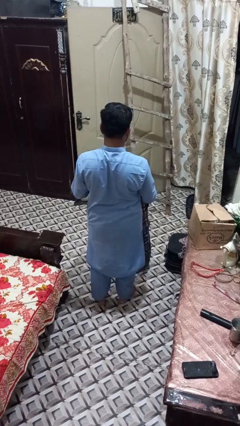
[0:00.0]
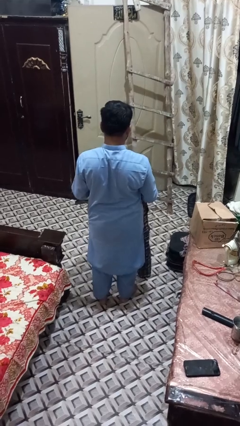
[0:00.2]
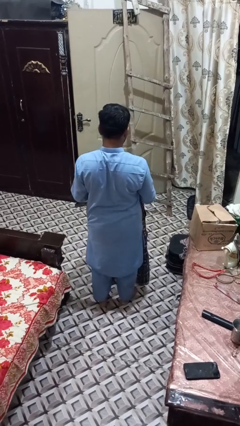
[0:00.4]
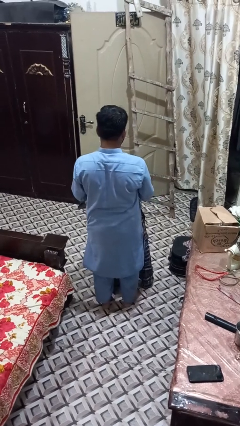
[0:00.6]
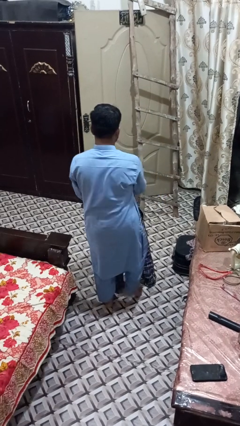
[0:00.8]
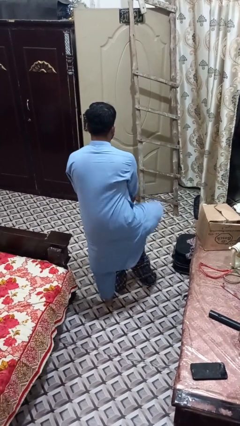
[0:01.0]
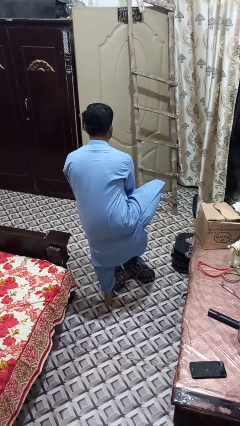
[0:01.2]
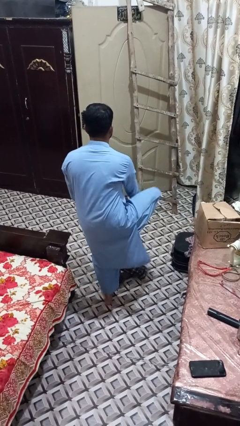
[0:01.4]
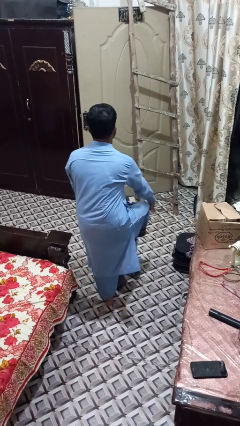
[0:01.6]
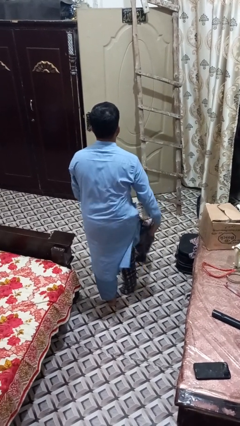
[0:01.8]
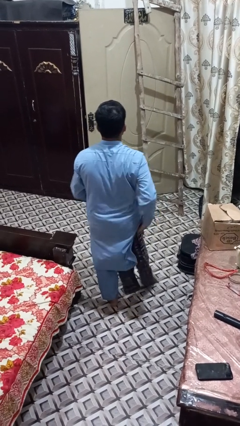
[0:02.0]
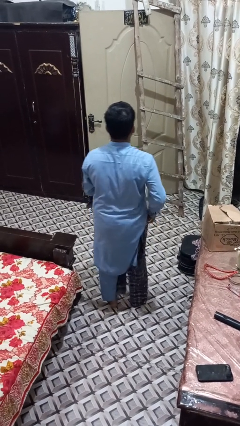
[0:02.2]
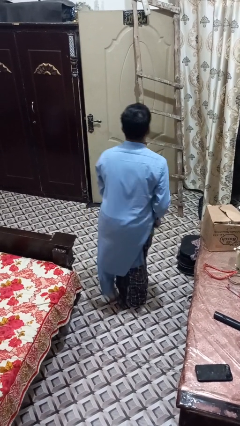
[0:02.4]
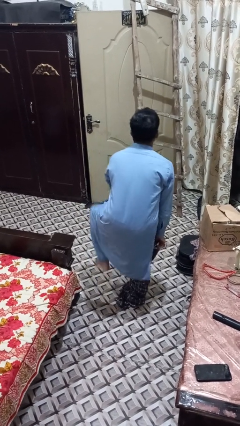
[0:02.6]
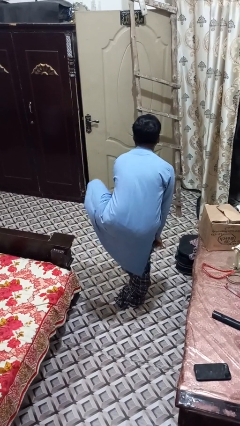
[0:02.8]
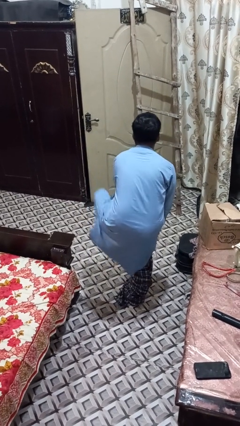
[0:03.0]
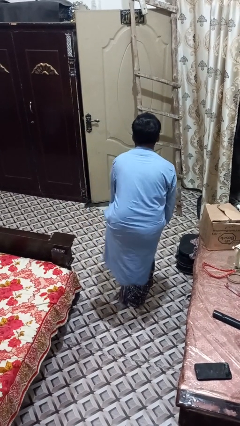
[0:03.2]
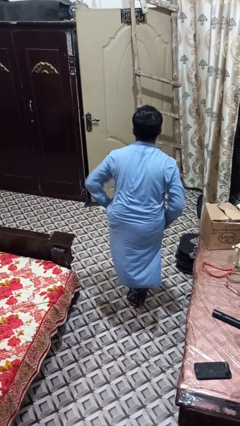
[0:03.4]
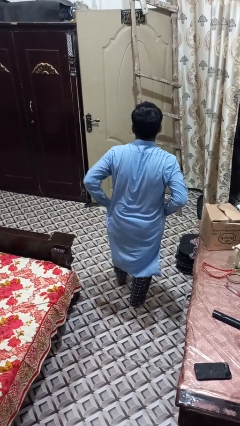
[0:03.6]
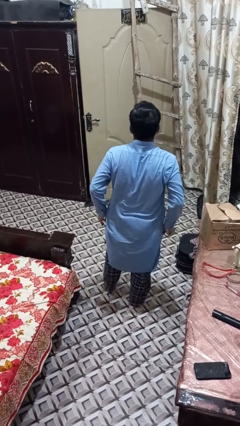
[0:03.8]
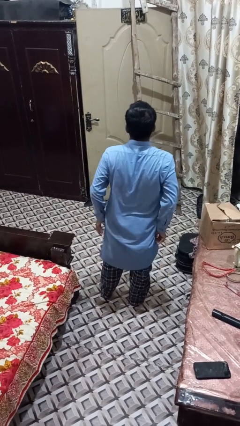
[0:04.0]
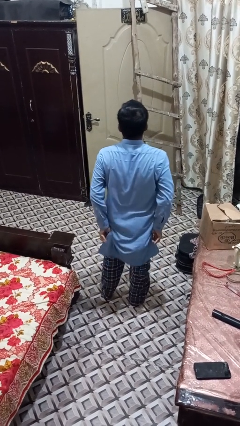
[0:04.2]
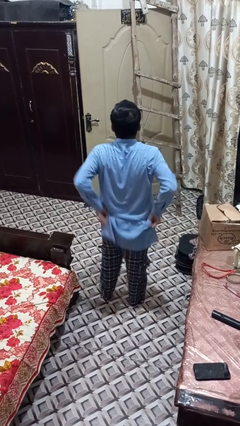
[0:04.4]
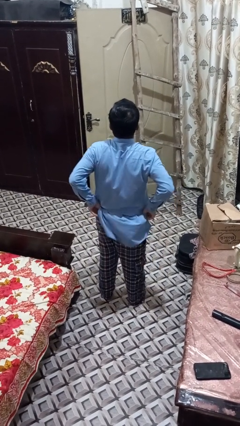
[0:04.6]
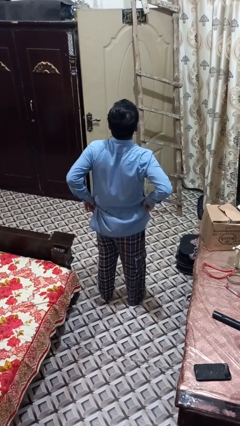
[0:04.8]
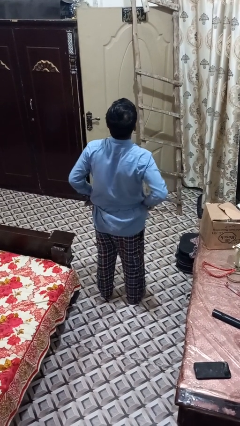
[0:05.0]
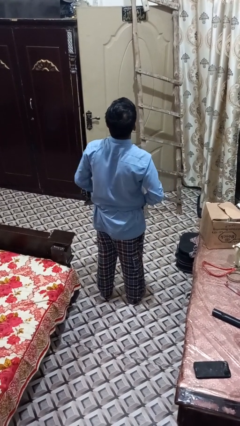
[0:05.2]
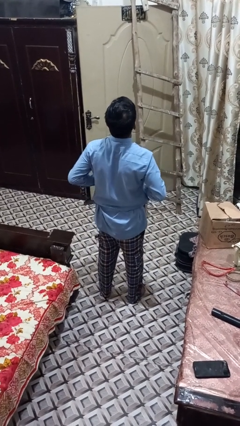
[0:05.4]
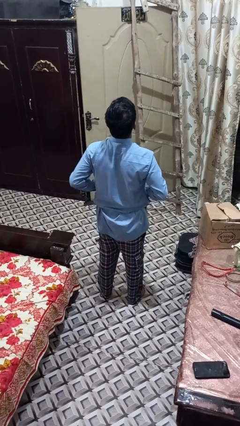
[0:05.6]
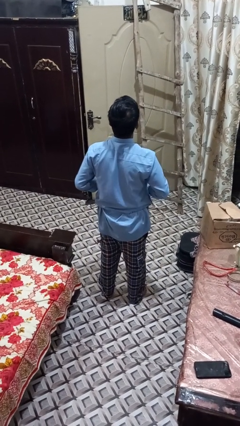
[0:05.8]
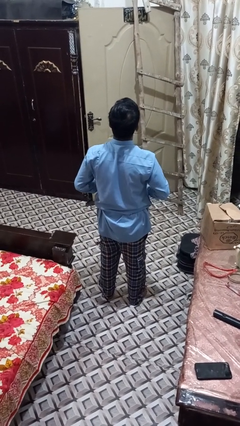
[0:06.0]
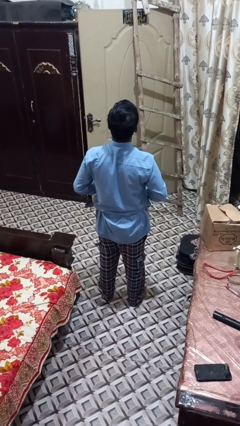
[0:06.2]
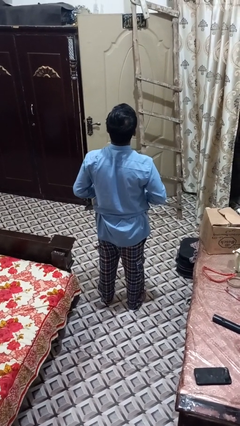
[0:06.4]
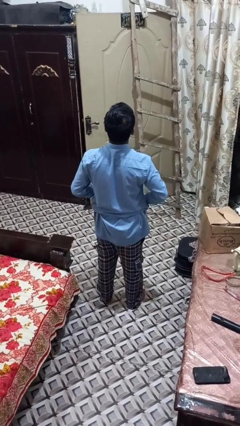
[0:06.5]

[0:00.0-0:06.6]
person puts on pants

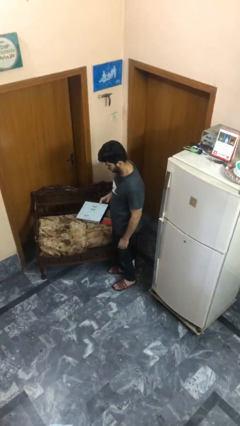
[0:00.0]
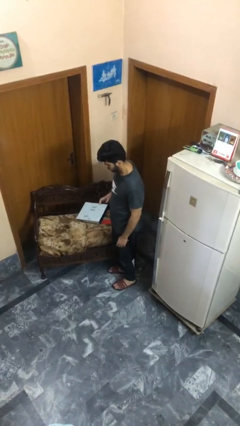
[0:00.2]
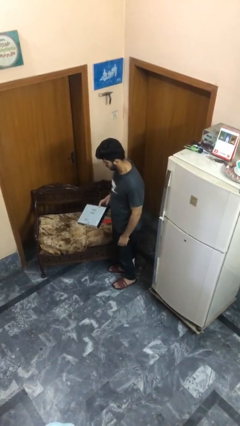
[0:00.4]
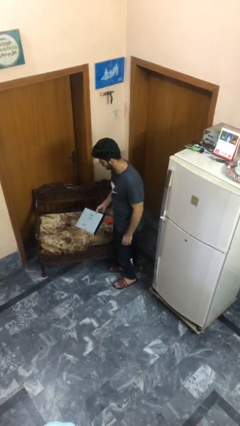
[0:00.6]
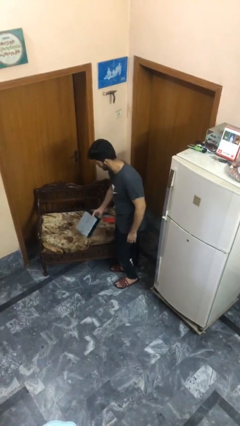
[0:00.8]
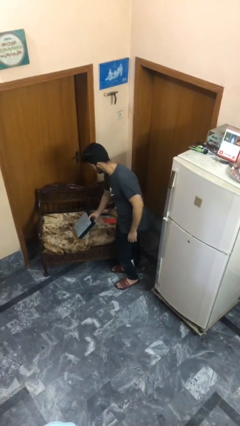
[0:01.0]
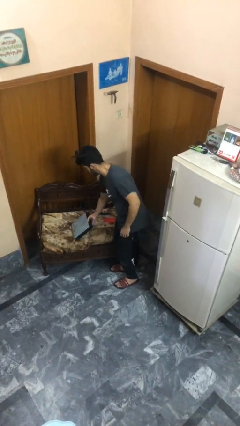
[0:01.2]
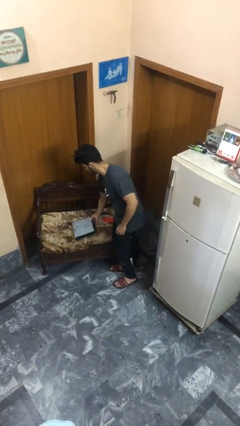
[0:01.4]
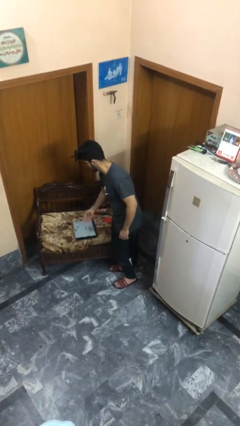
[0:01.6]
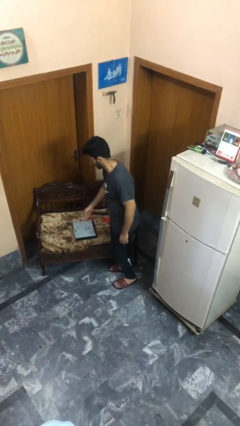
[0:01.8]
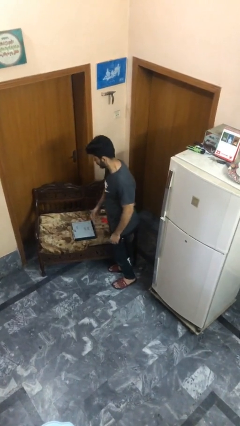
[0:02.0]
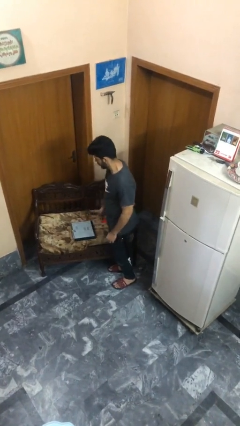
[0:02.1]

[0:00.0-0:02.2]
person puts down object on couch

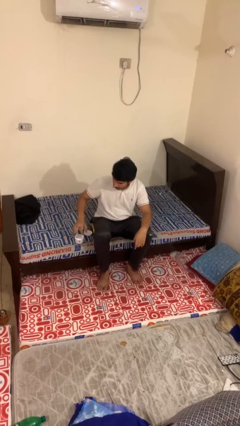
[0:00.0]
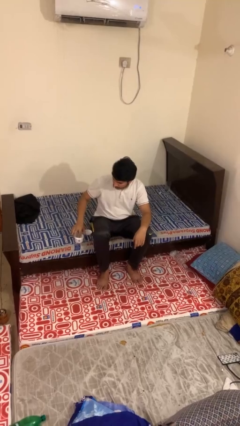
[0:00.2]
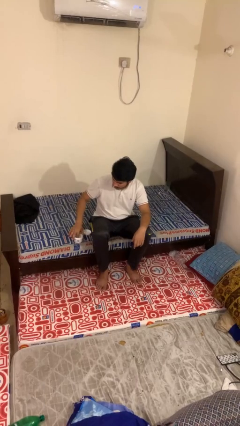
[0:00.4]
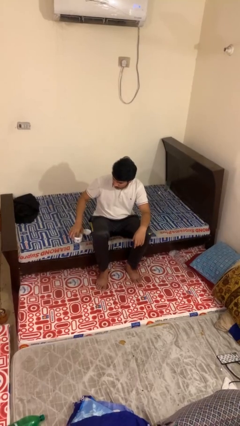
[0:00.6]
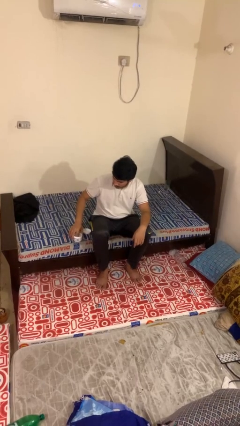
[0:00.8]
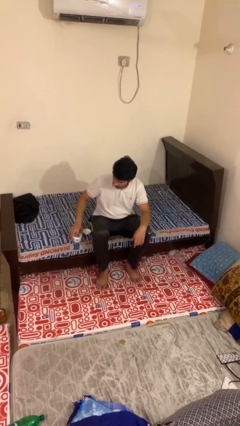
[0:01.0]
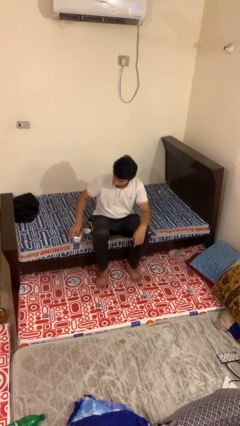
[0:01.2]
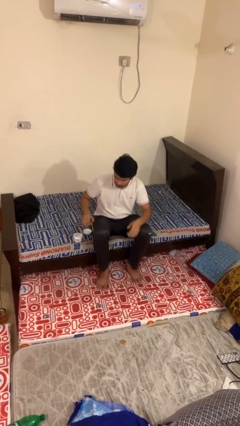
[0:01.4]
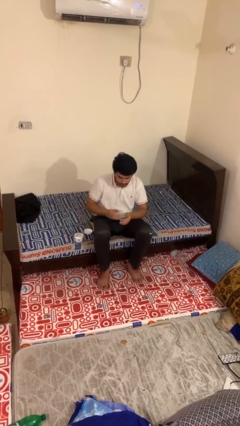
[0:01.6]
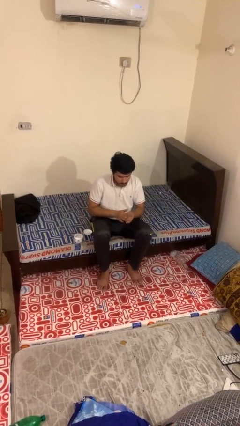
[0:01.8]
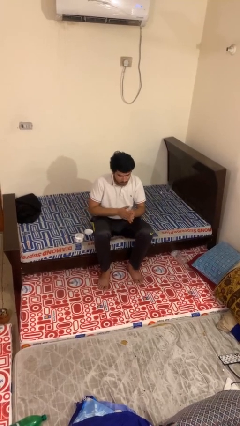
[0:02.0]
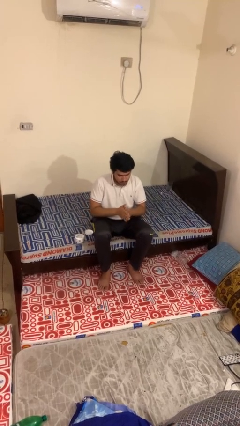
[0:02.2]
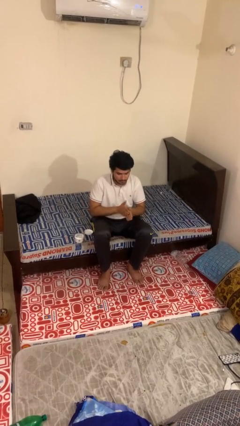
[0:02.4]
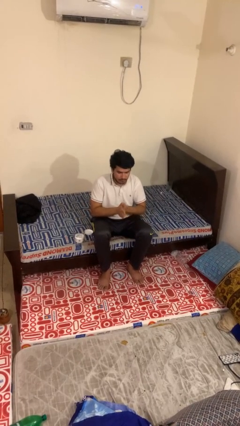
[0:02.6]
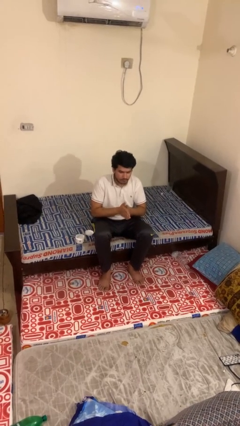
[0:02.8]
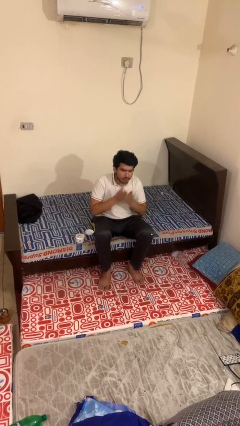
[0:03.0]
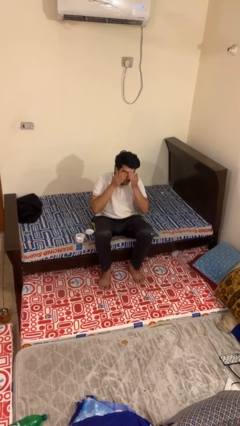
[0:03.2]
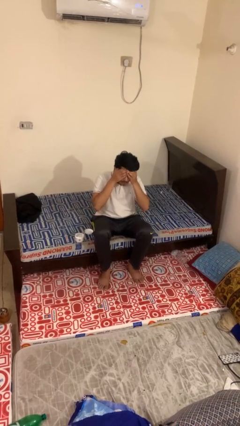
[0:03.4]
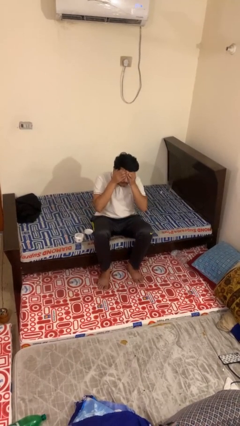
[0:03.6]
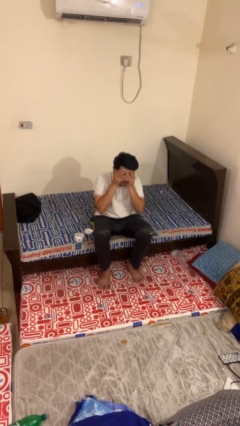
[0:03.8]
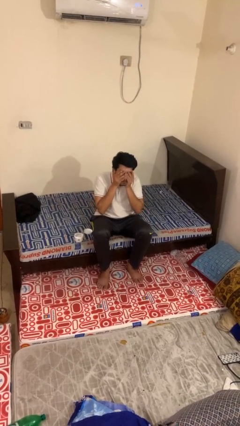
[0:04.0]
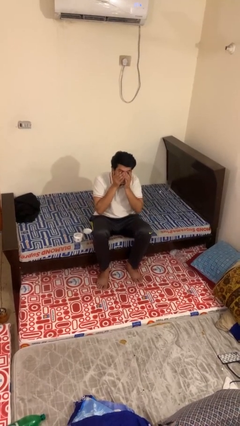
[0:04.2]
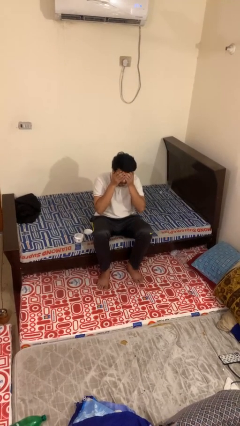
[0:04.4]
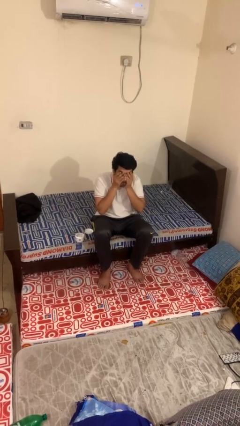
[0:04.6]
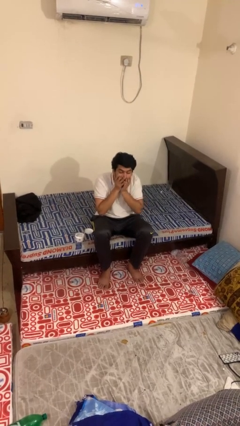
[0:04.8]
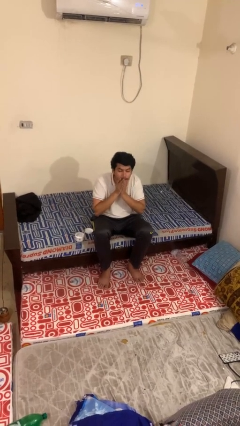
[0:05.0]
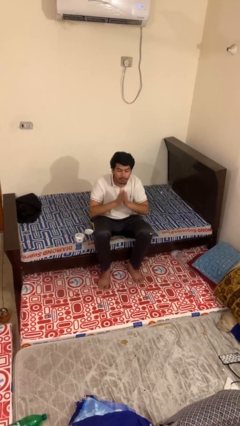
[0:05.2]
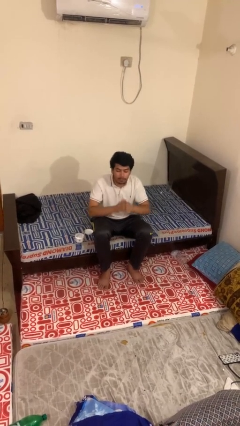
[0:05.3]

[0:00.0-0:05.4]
person applies facial moisturizer

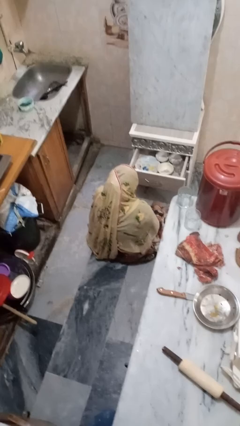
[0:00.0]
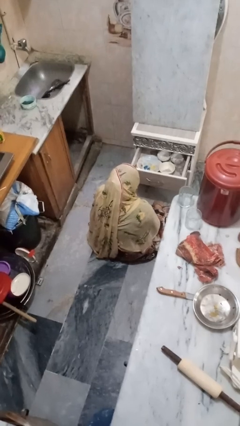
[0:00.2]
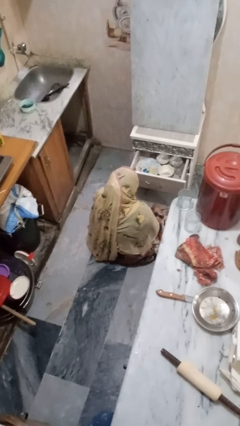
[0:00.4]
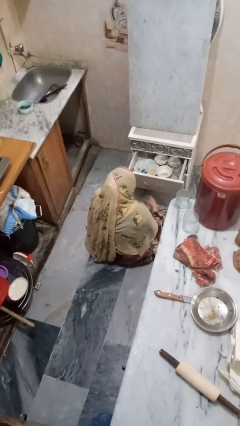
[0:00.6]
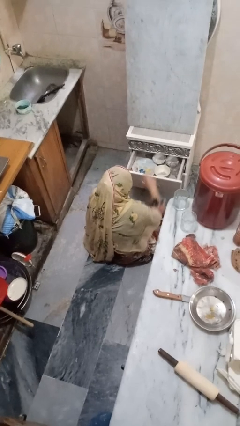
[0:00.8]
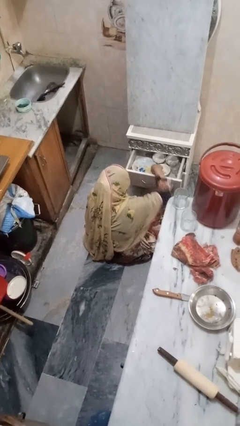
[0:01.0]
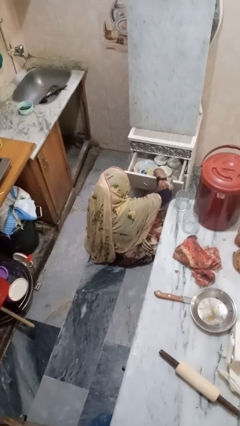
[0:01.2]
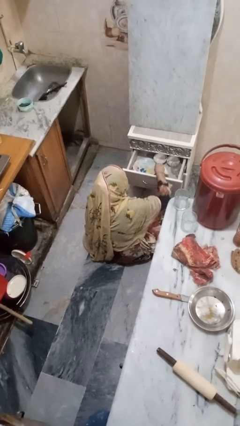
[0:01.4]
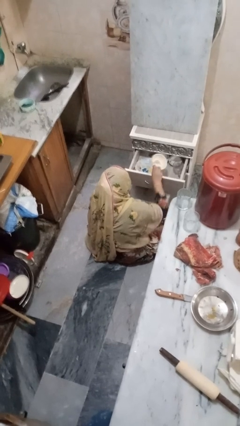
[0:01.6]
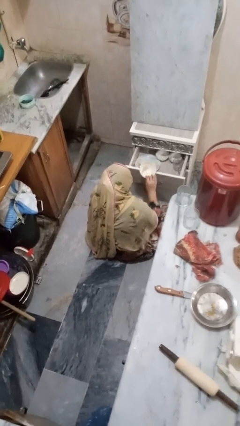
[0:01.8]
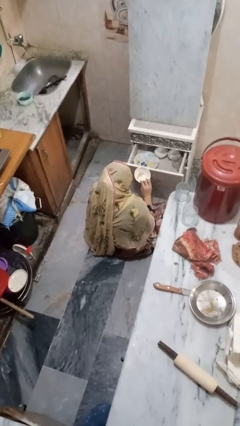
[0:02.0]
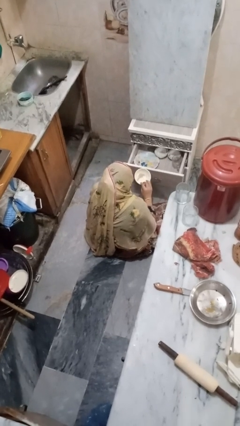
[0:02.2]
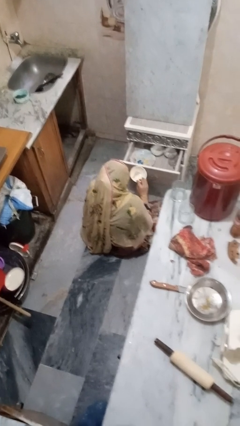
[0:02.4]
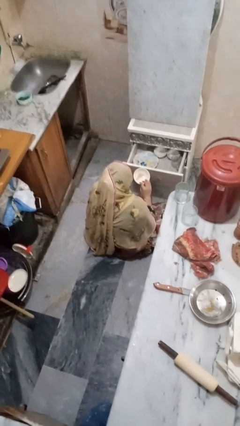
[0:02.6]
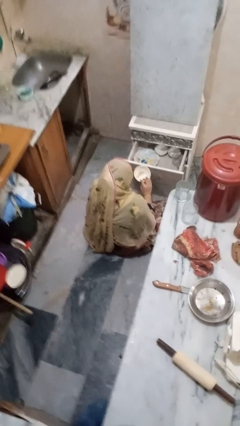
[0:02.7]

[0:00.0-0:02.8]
person takes object from kitchen drawer

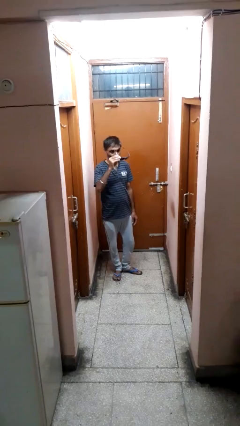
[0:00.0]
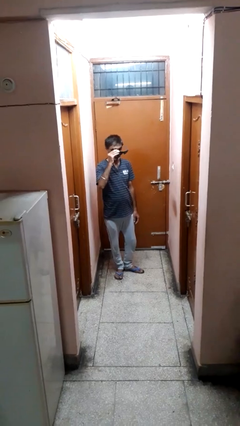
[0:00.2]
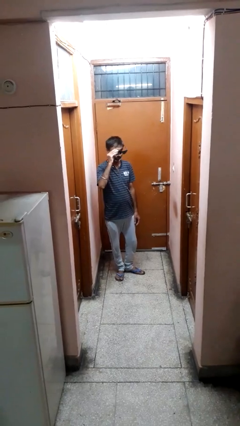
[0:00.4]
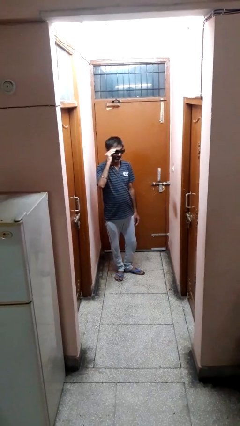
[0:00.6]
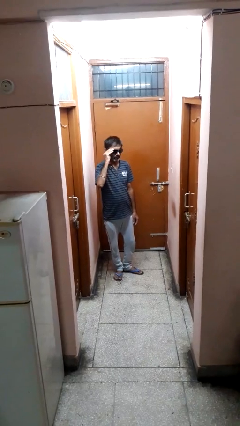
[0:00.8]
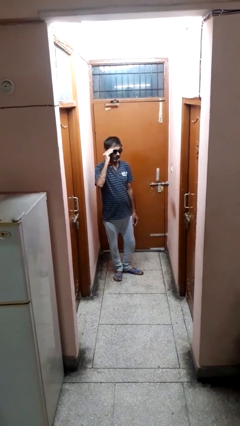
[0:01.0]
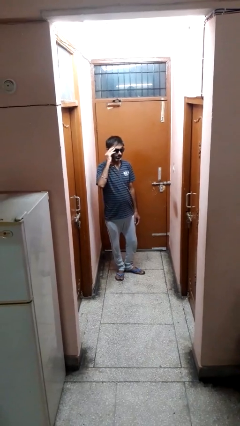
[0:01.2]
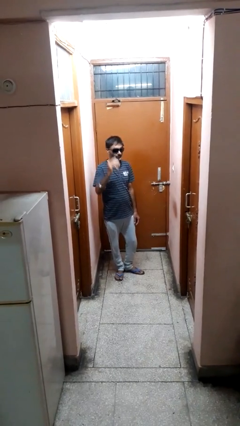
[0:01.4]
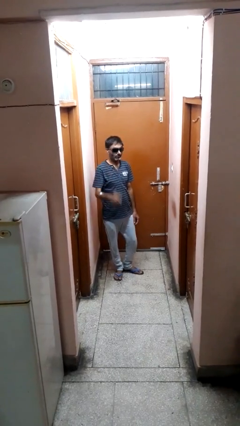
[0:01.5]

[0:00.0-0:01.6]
person puts on sunglasses
